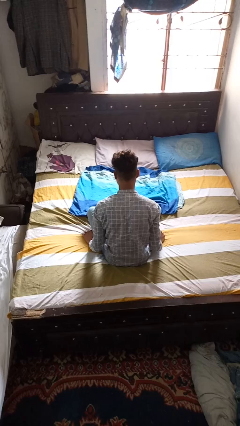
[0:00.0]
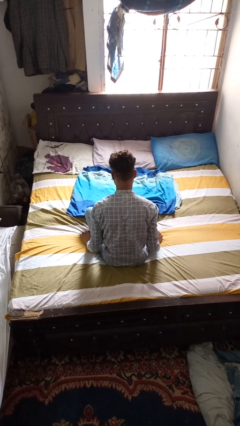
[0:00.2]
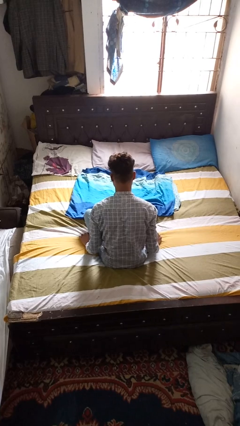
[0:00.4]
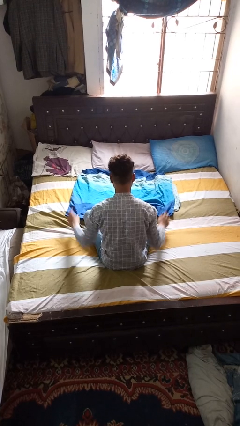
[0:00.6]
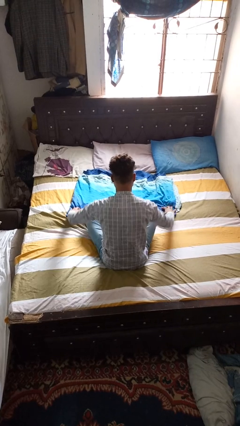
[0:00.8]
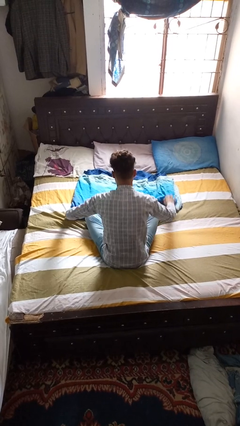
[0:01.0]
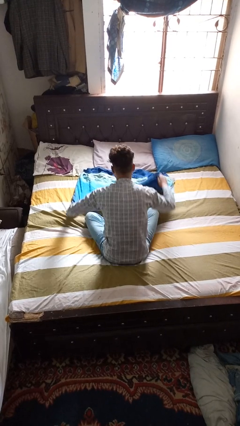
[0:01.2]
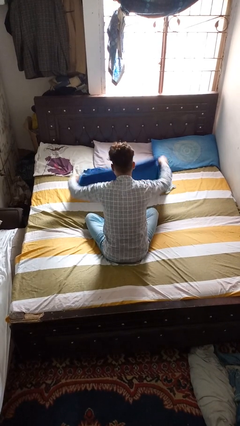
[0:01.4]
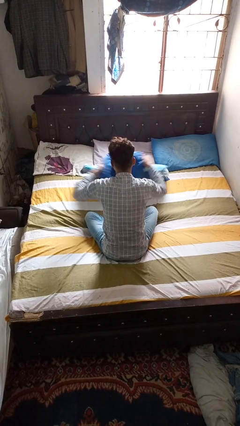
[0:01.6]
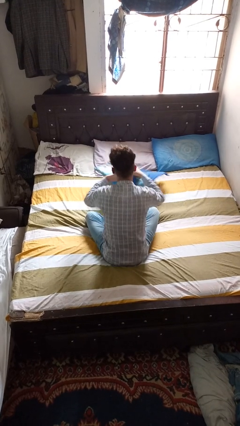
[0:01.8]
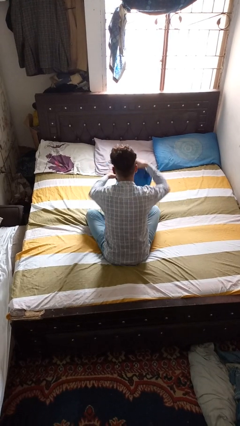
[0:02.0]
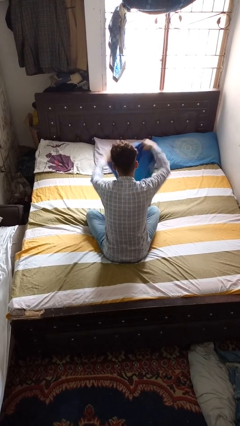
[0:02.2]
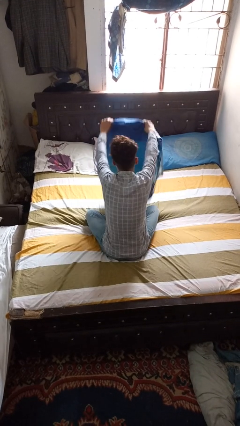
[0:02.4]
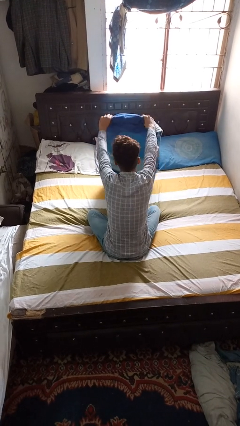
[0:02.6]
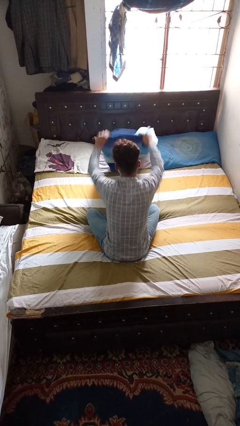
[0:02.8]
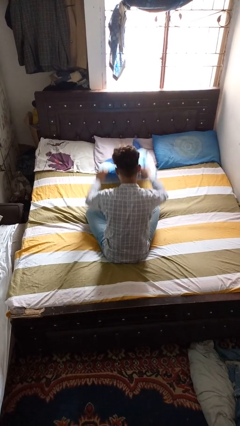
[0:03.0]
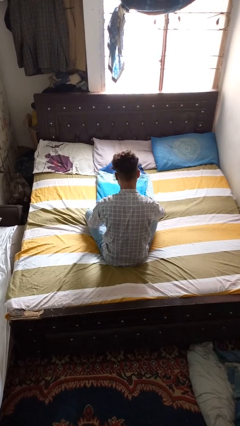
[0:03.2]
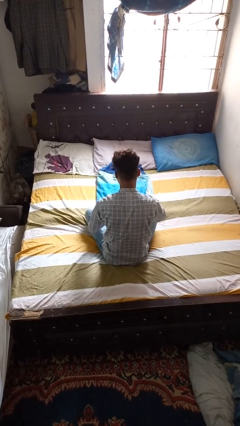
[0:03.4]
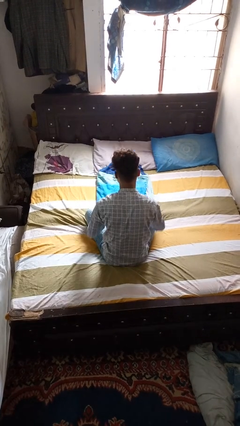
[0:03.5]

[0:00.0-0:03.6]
person folds blanket

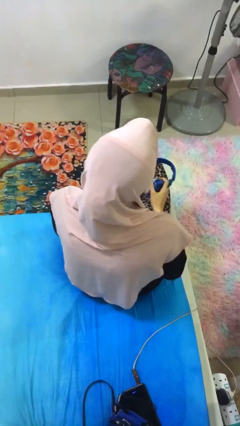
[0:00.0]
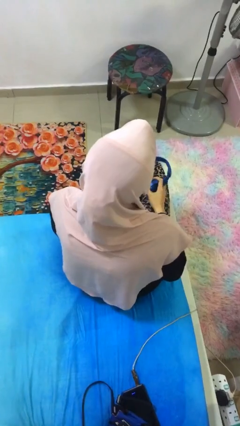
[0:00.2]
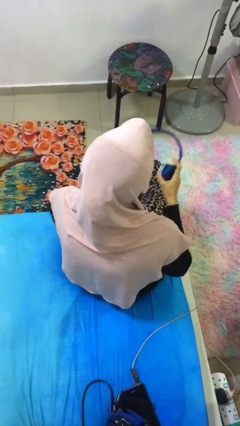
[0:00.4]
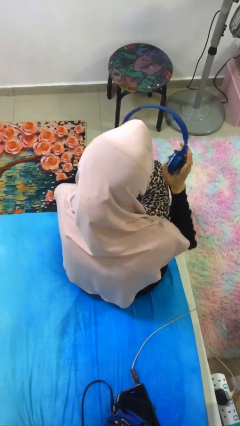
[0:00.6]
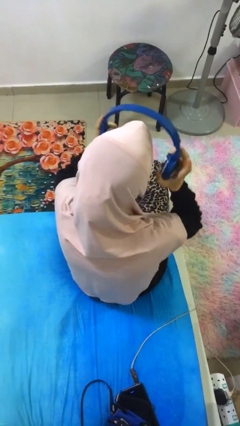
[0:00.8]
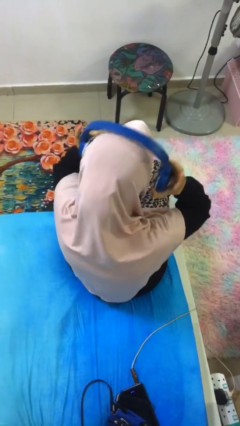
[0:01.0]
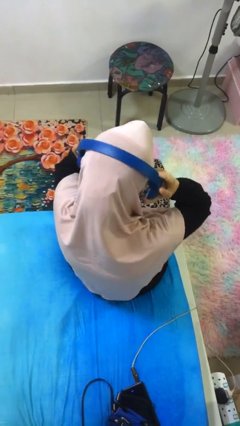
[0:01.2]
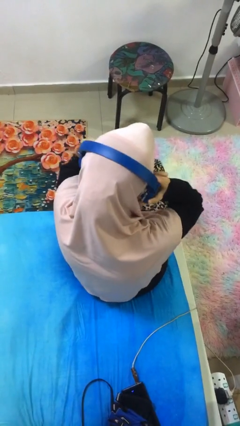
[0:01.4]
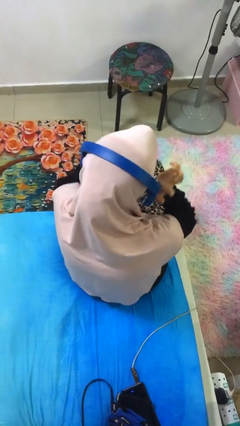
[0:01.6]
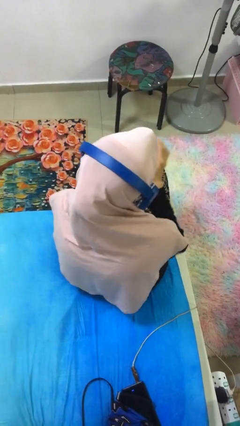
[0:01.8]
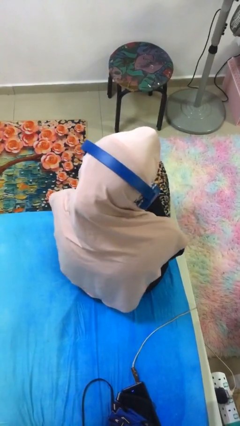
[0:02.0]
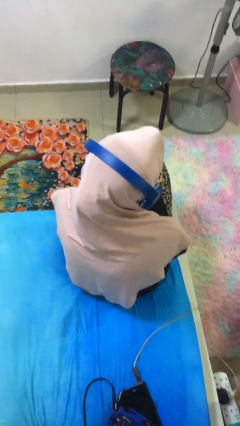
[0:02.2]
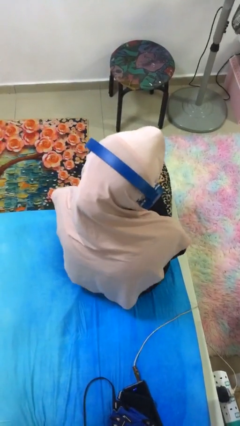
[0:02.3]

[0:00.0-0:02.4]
person puts on headphones

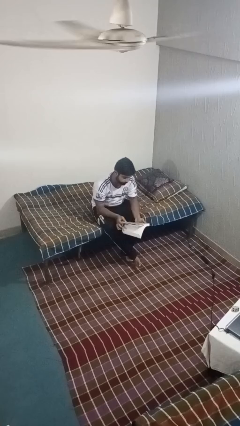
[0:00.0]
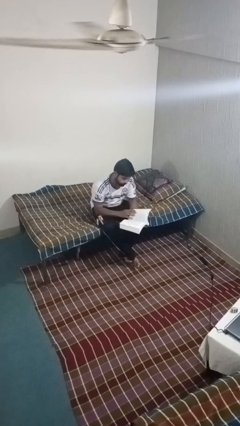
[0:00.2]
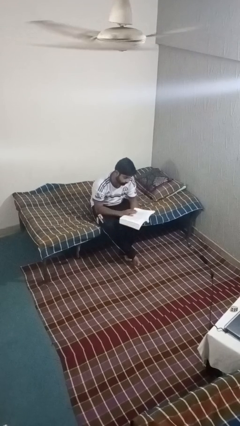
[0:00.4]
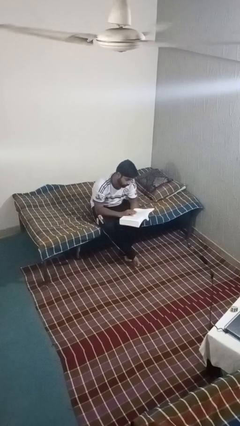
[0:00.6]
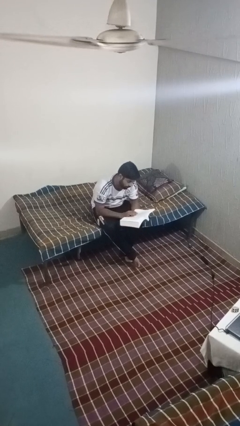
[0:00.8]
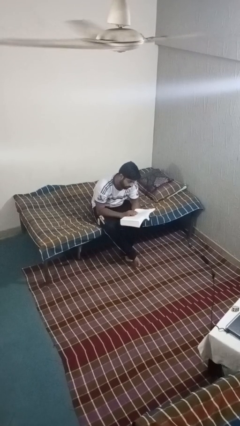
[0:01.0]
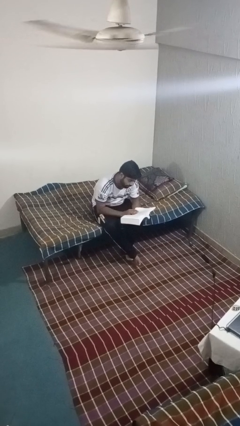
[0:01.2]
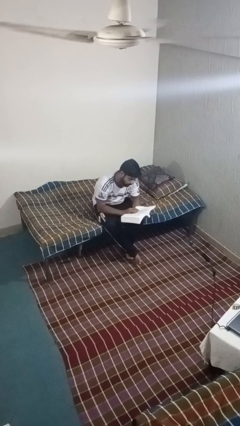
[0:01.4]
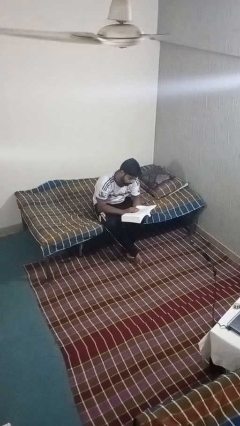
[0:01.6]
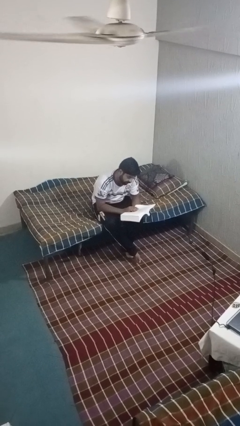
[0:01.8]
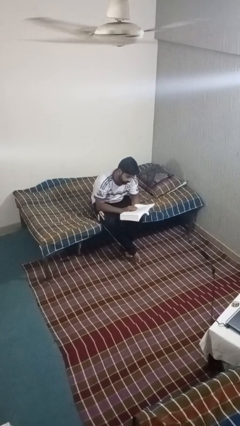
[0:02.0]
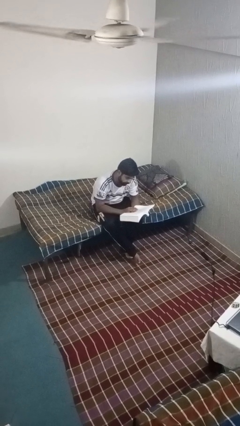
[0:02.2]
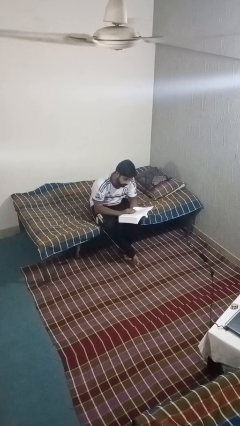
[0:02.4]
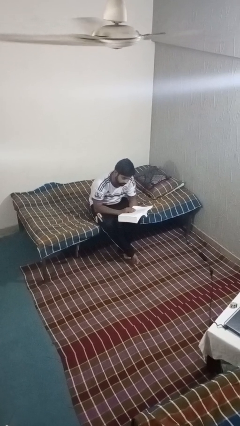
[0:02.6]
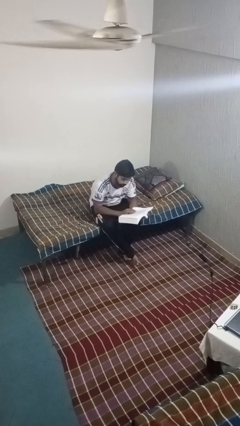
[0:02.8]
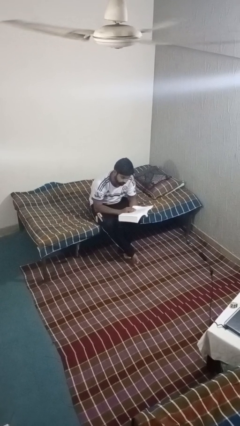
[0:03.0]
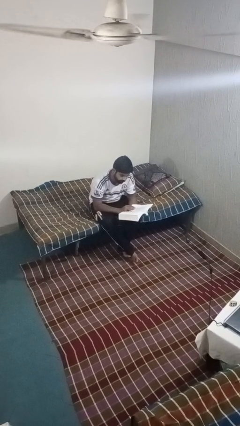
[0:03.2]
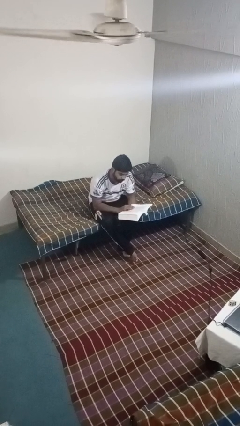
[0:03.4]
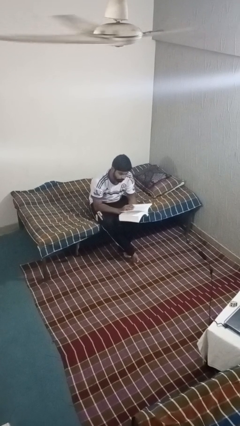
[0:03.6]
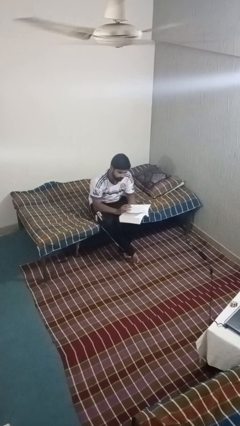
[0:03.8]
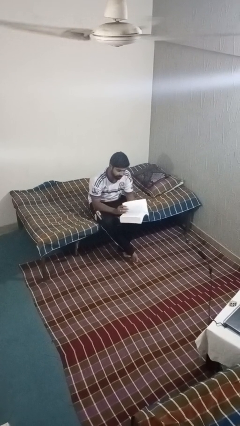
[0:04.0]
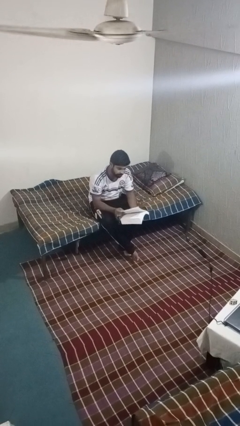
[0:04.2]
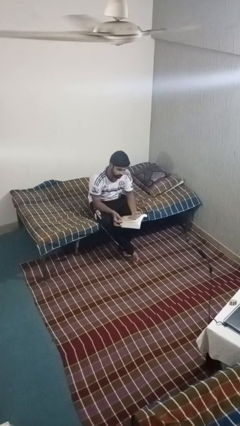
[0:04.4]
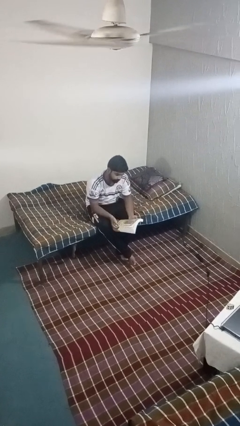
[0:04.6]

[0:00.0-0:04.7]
person reads book

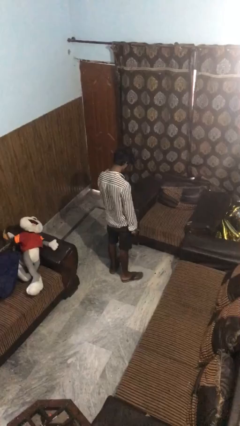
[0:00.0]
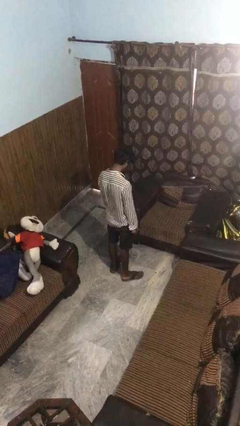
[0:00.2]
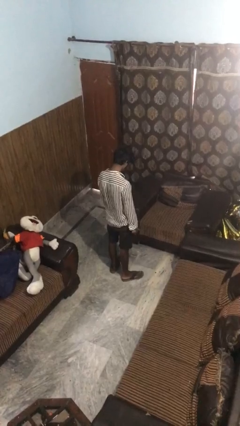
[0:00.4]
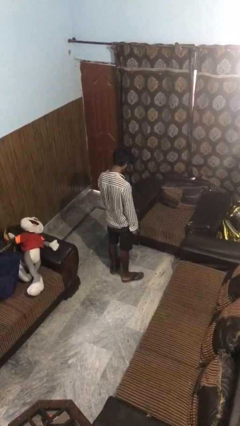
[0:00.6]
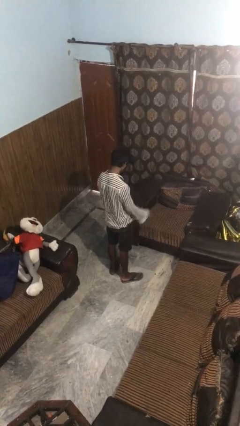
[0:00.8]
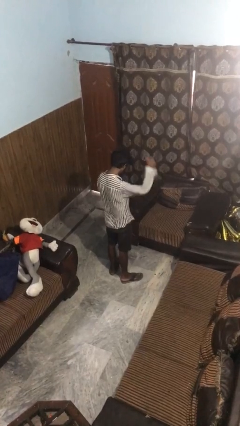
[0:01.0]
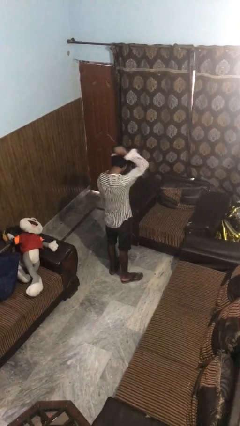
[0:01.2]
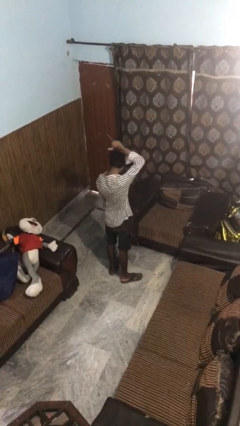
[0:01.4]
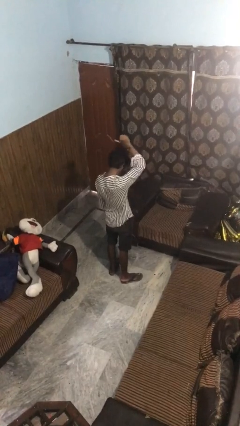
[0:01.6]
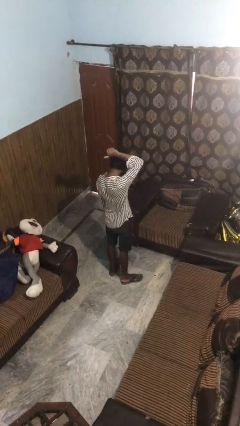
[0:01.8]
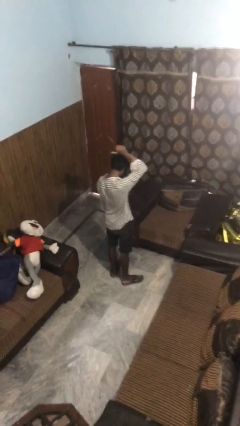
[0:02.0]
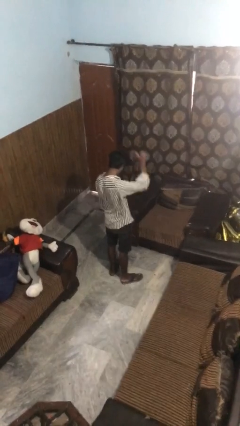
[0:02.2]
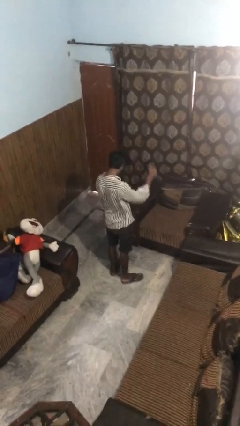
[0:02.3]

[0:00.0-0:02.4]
person gestures behind me

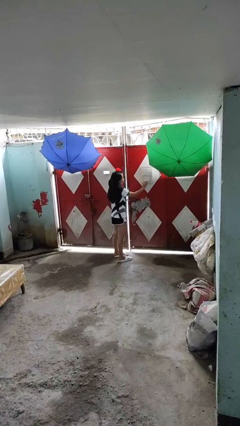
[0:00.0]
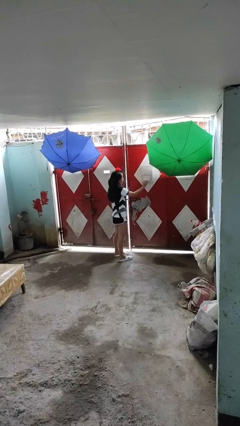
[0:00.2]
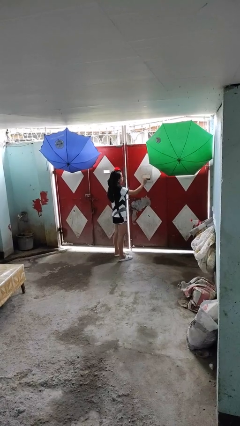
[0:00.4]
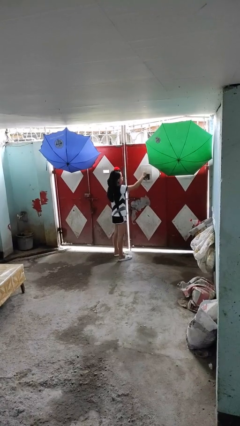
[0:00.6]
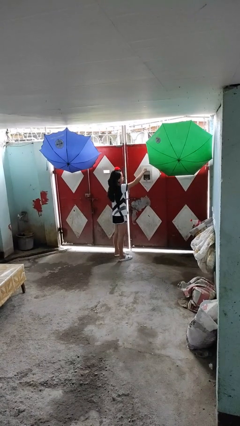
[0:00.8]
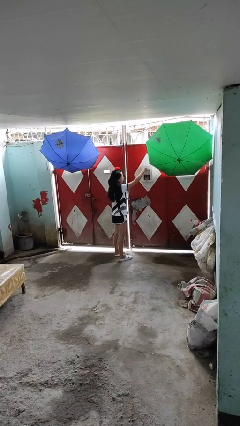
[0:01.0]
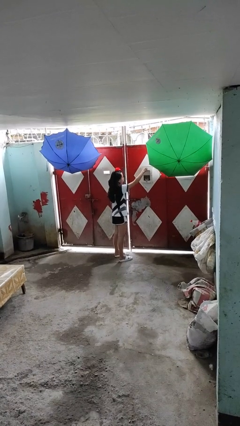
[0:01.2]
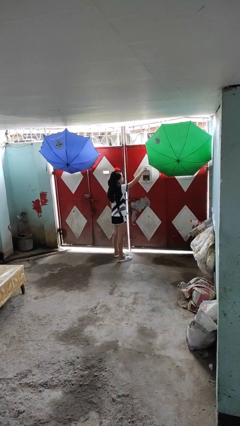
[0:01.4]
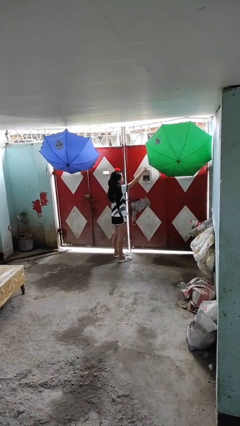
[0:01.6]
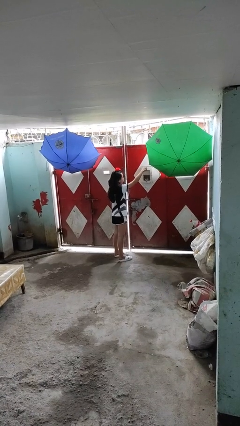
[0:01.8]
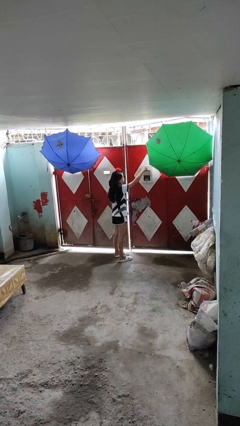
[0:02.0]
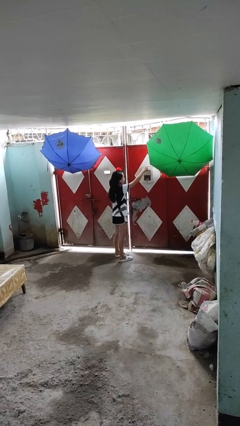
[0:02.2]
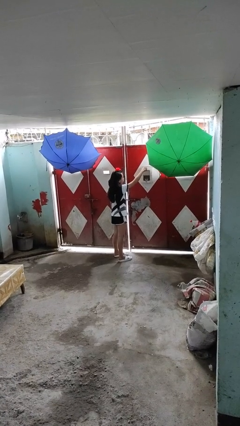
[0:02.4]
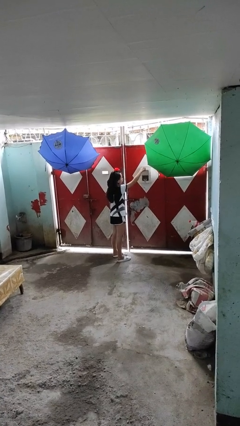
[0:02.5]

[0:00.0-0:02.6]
person opens mailbox

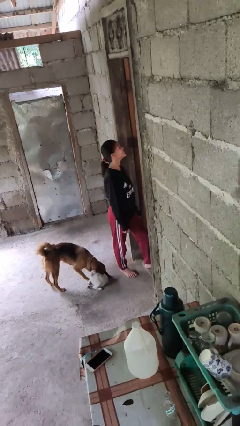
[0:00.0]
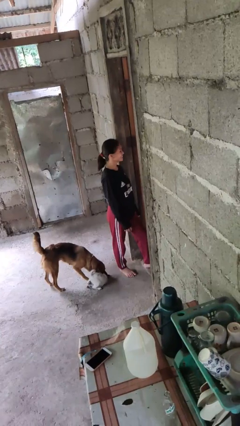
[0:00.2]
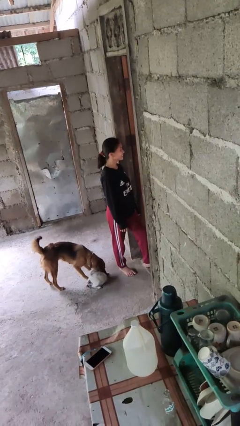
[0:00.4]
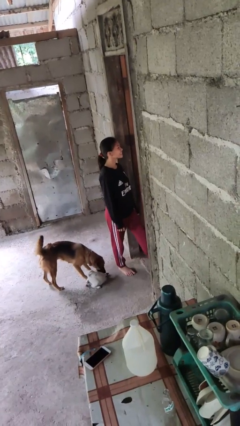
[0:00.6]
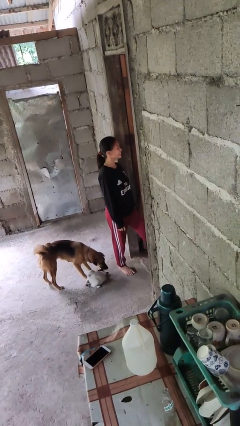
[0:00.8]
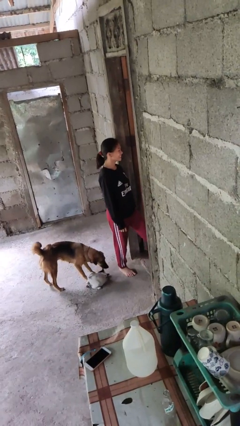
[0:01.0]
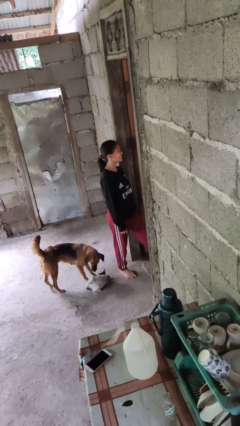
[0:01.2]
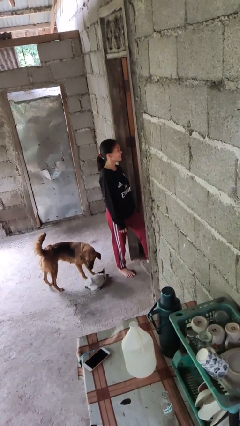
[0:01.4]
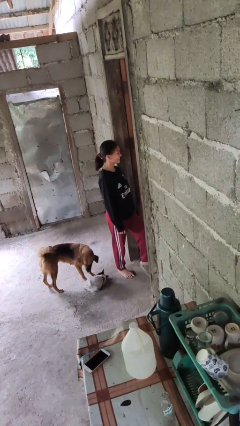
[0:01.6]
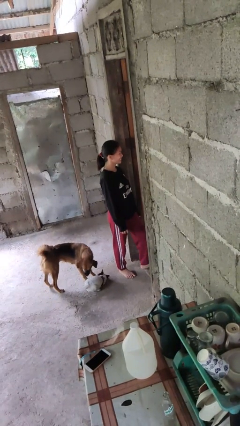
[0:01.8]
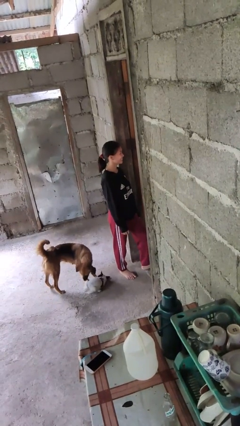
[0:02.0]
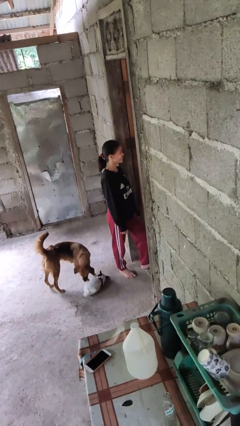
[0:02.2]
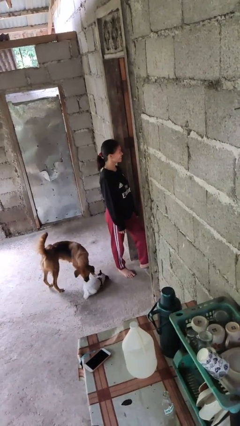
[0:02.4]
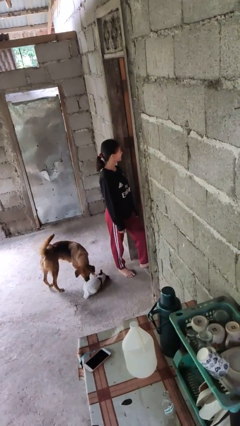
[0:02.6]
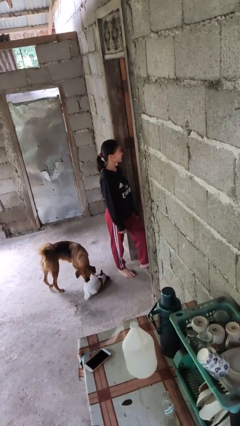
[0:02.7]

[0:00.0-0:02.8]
person nods head
